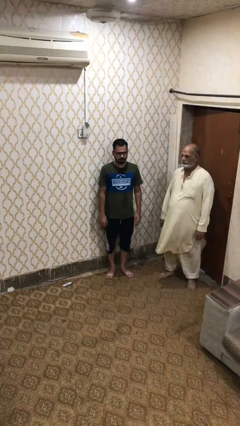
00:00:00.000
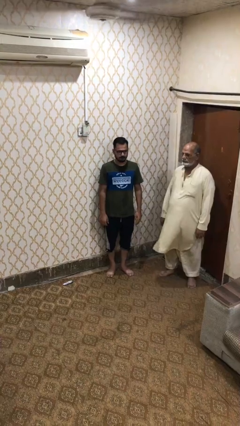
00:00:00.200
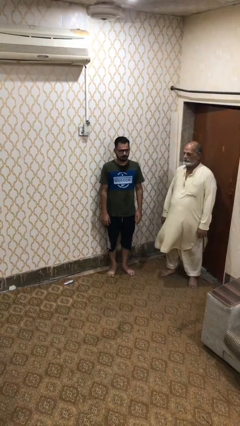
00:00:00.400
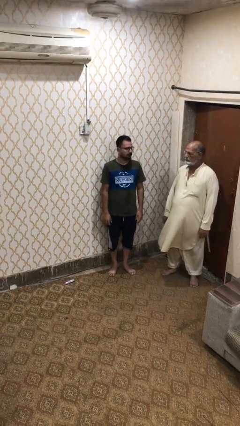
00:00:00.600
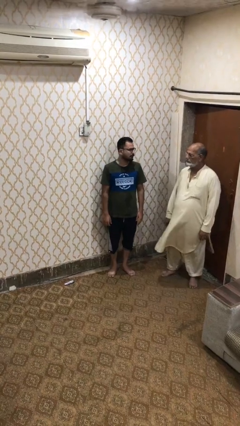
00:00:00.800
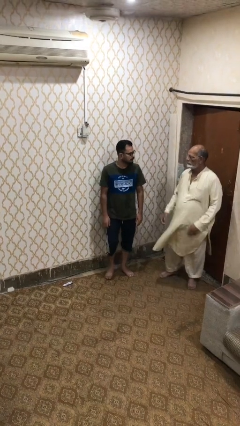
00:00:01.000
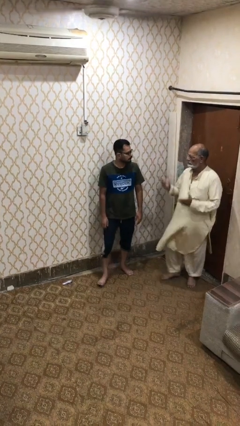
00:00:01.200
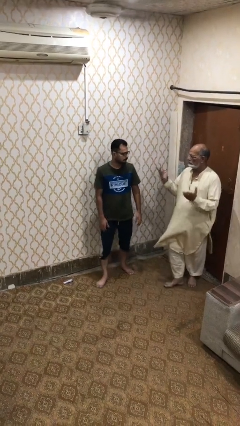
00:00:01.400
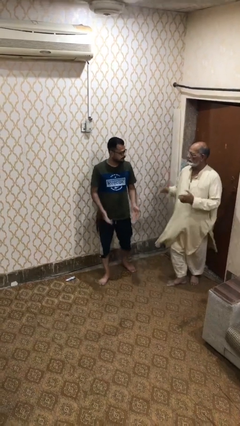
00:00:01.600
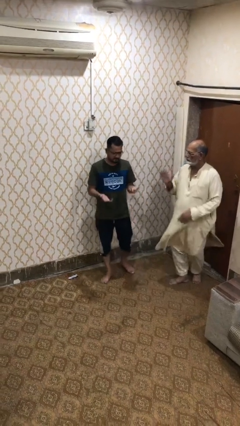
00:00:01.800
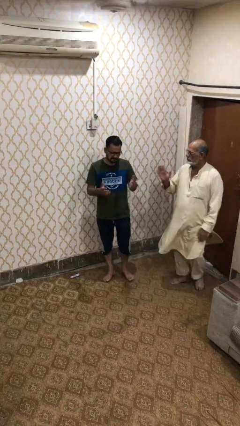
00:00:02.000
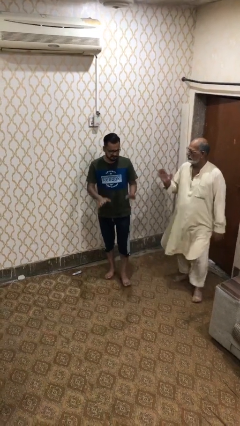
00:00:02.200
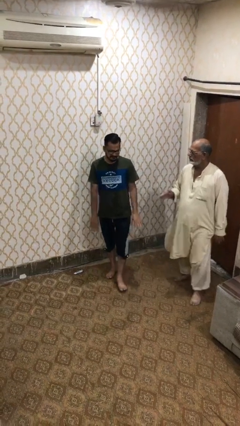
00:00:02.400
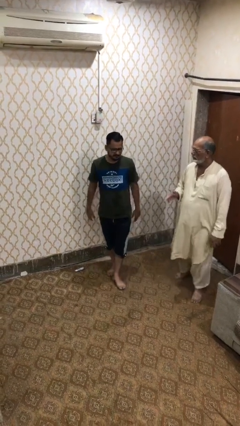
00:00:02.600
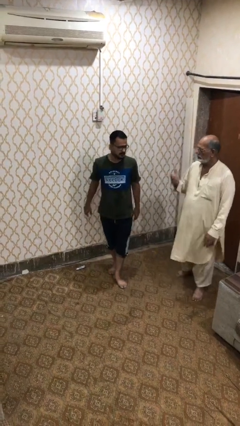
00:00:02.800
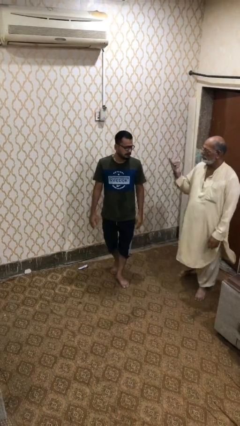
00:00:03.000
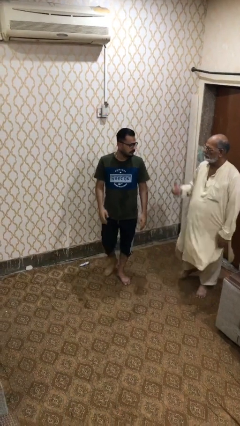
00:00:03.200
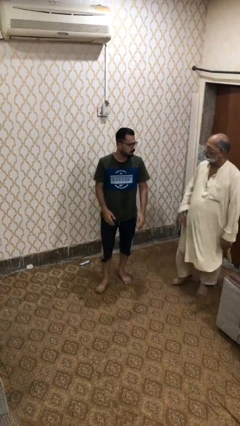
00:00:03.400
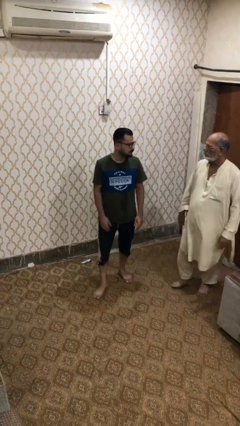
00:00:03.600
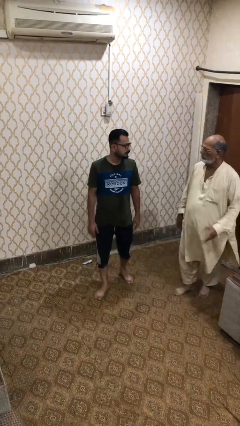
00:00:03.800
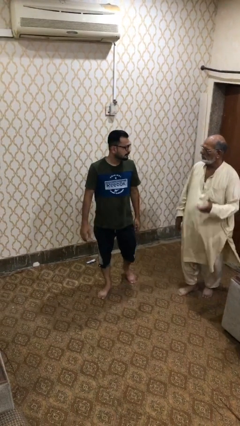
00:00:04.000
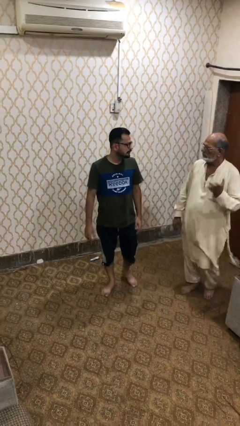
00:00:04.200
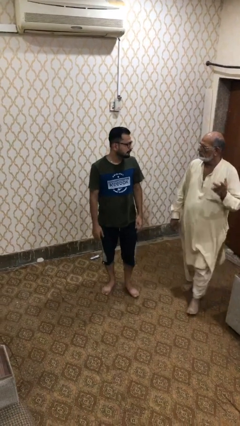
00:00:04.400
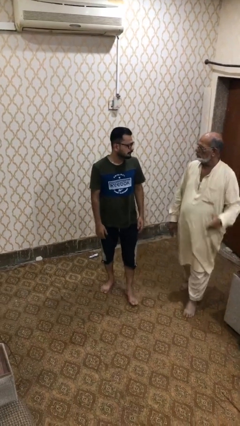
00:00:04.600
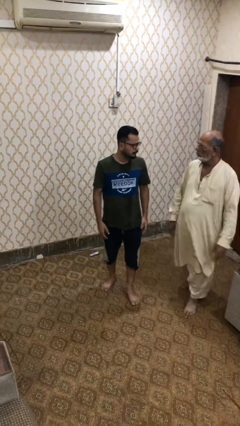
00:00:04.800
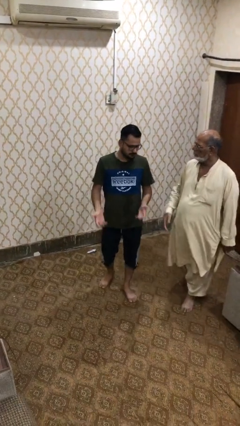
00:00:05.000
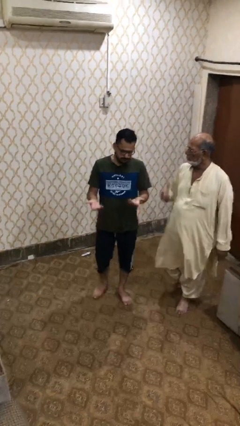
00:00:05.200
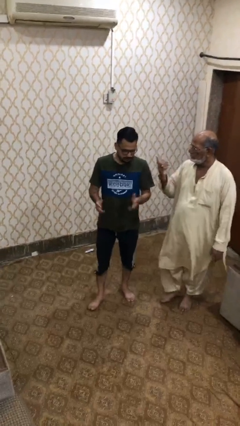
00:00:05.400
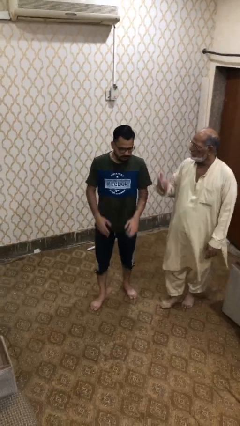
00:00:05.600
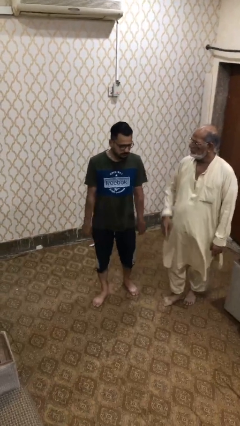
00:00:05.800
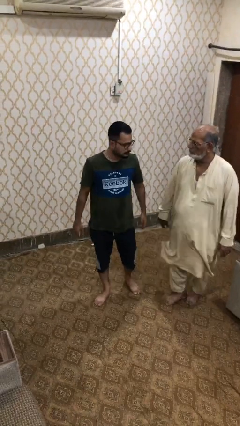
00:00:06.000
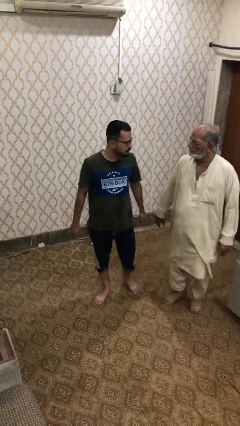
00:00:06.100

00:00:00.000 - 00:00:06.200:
person talks to person

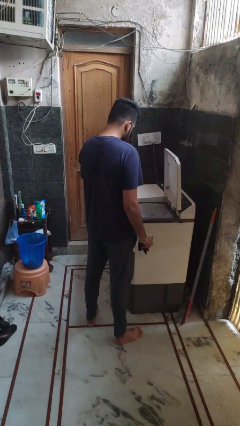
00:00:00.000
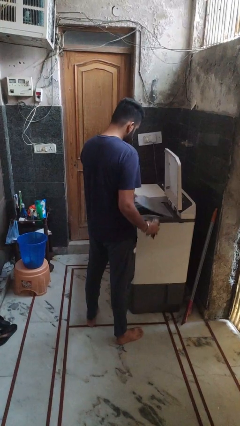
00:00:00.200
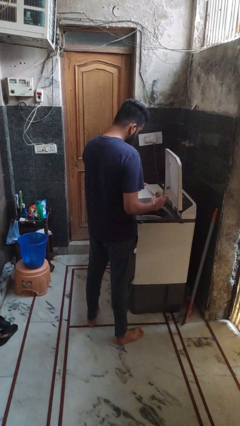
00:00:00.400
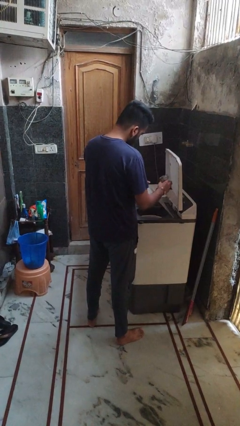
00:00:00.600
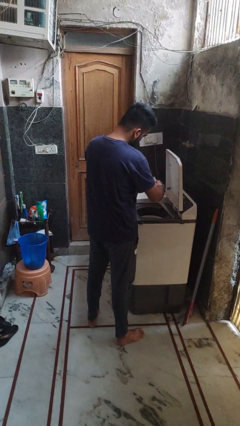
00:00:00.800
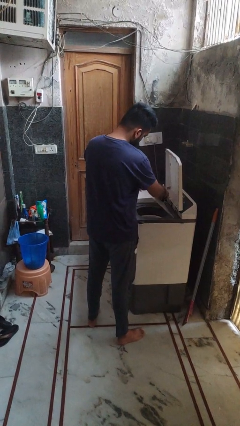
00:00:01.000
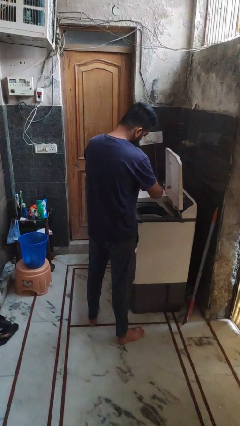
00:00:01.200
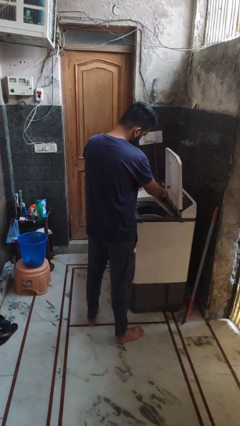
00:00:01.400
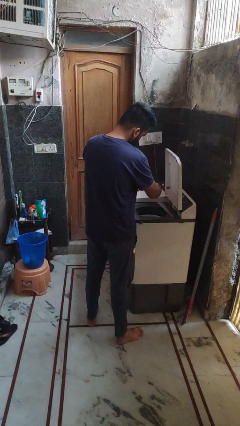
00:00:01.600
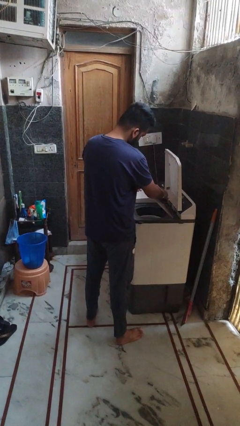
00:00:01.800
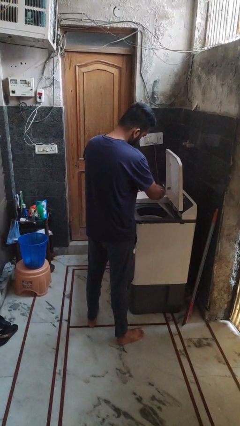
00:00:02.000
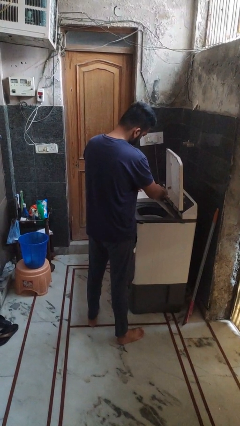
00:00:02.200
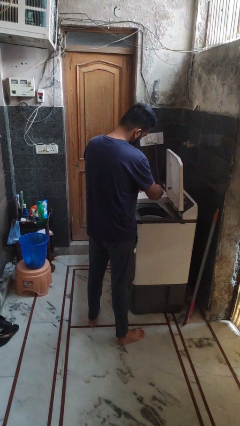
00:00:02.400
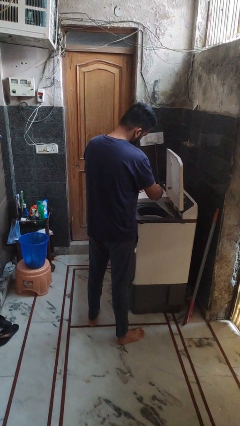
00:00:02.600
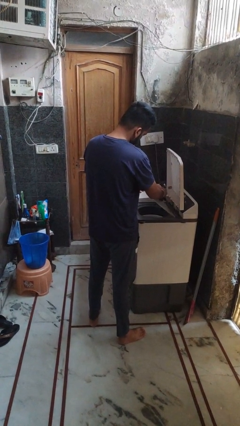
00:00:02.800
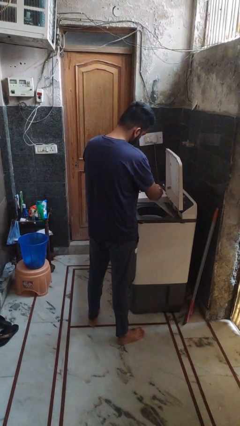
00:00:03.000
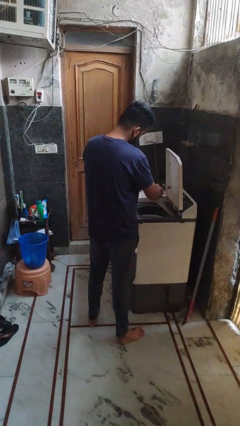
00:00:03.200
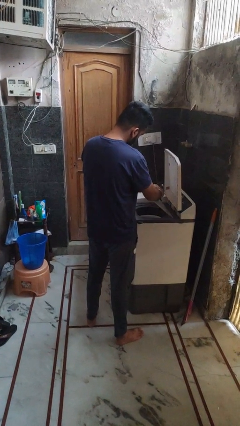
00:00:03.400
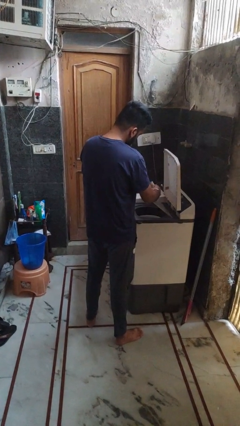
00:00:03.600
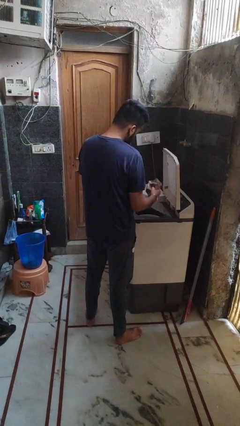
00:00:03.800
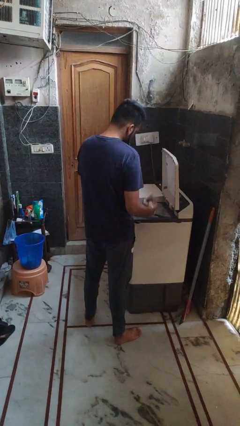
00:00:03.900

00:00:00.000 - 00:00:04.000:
person cleans dryer lint trap

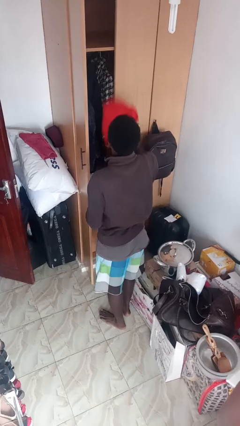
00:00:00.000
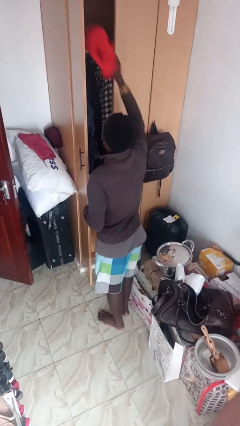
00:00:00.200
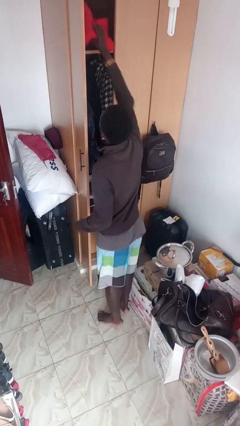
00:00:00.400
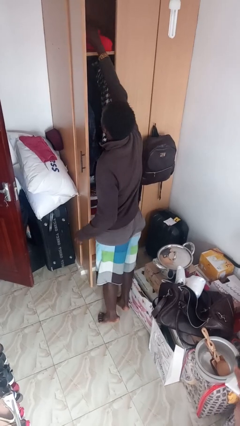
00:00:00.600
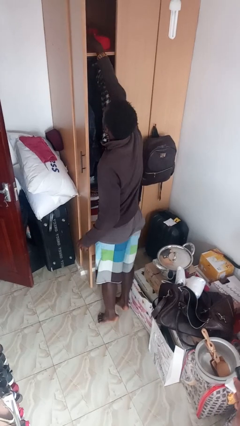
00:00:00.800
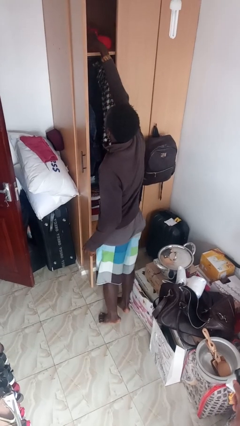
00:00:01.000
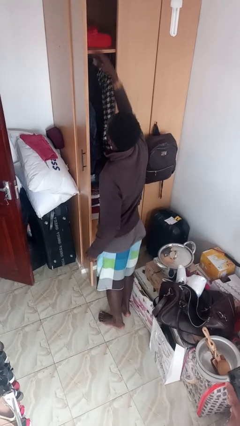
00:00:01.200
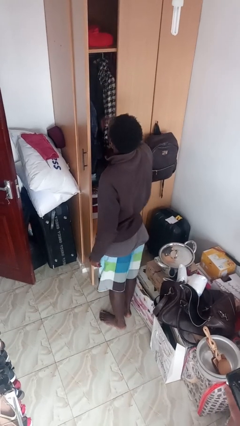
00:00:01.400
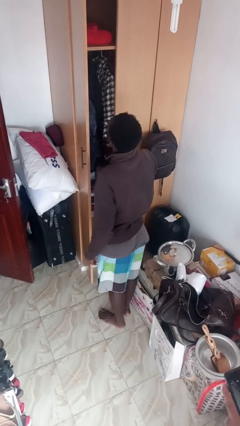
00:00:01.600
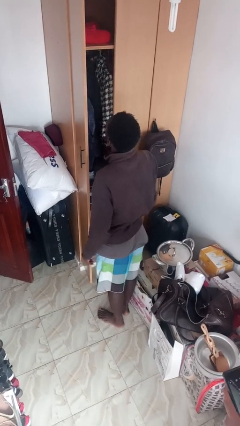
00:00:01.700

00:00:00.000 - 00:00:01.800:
person puts down object on shelf

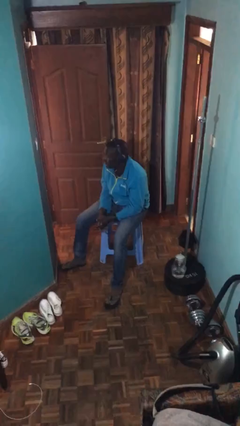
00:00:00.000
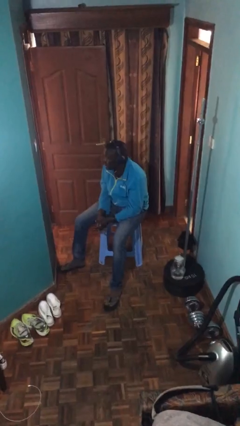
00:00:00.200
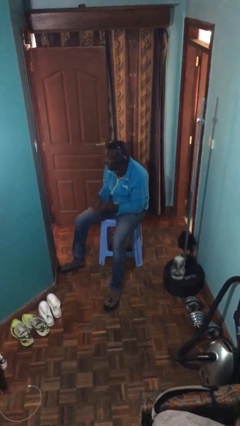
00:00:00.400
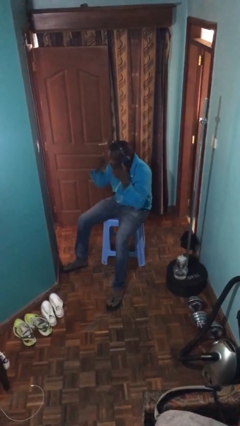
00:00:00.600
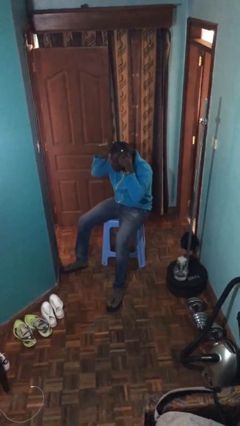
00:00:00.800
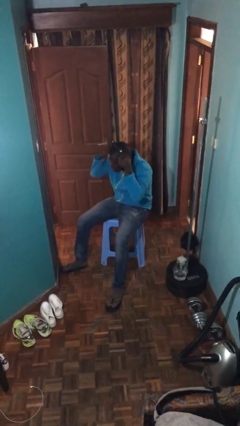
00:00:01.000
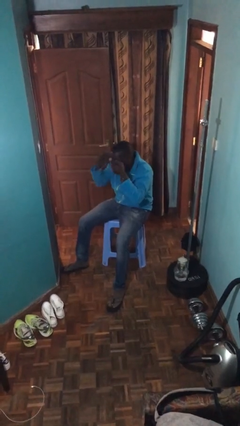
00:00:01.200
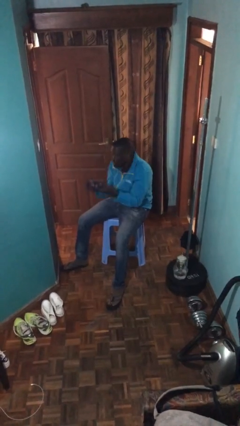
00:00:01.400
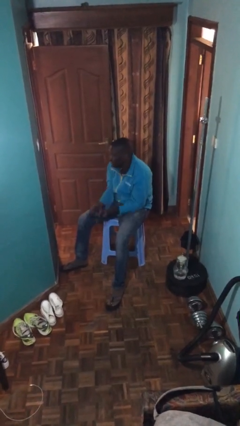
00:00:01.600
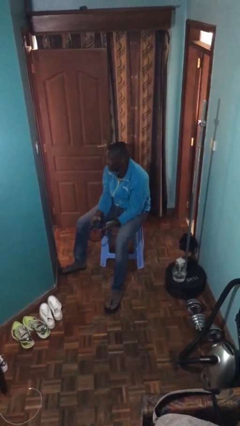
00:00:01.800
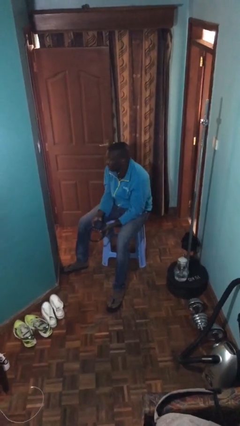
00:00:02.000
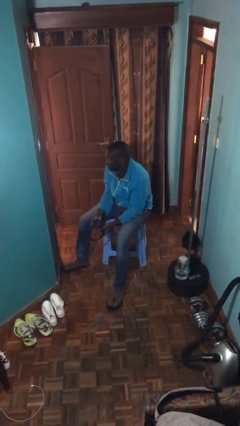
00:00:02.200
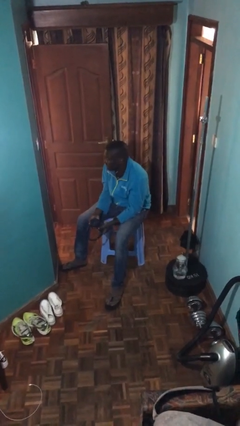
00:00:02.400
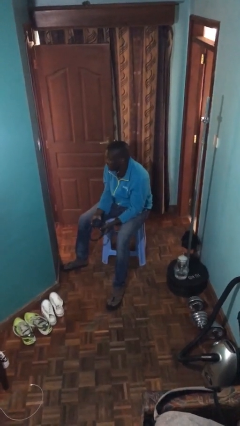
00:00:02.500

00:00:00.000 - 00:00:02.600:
person takes off headphones

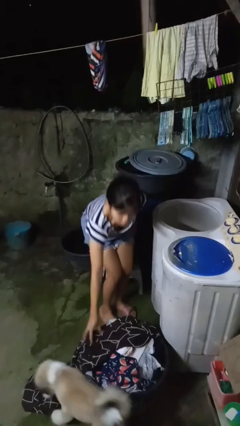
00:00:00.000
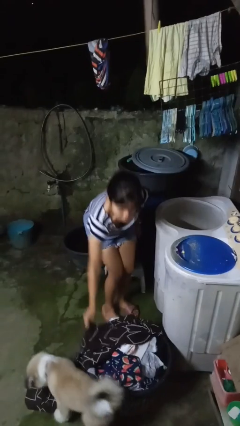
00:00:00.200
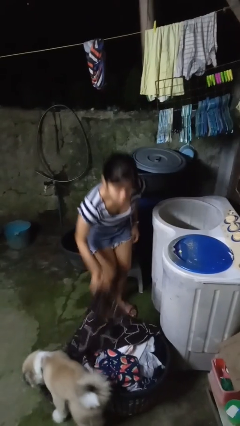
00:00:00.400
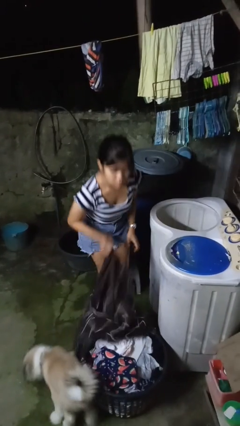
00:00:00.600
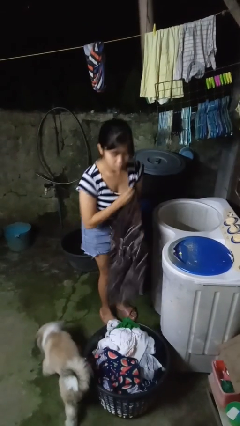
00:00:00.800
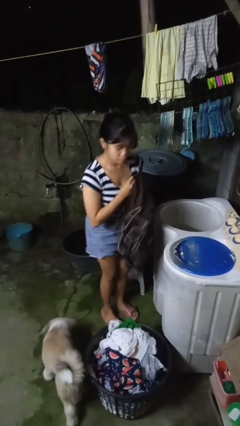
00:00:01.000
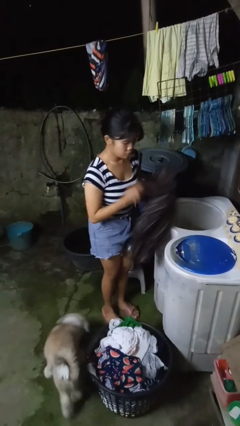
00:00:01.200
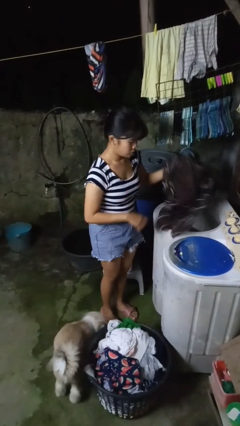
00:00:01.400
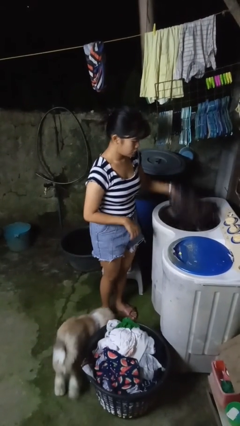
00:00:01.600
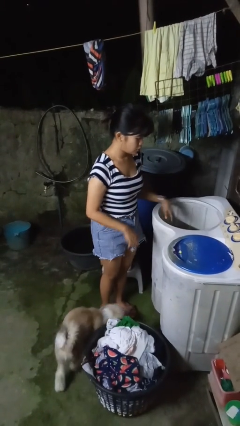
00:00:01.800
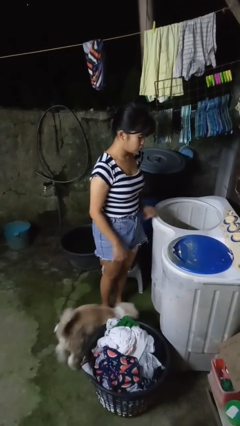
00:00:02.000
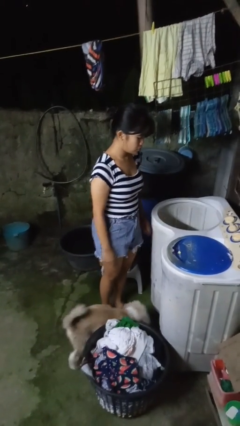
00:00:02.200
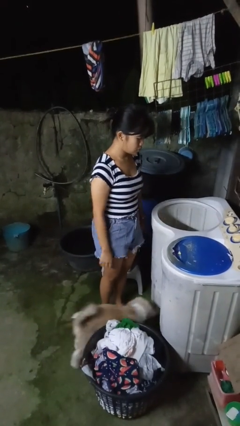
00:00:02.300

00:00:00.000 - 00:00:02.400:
person loads clotheswasher

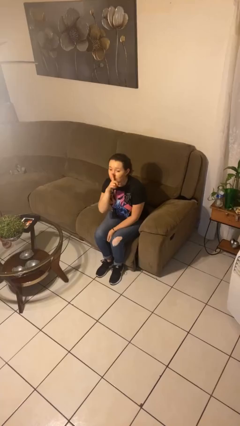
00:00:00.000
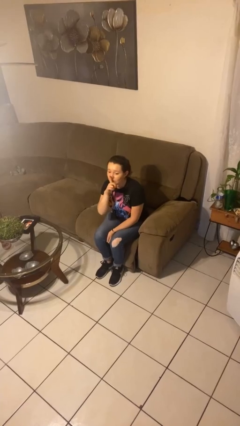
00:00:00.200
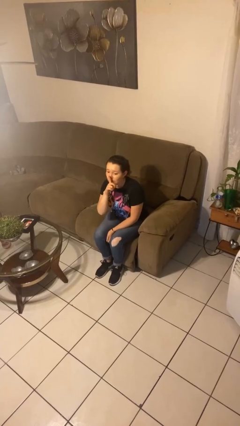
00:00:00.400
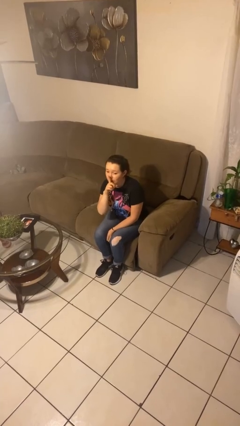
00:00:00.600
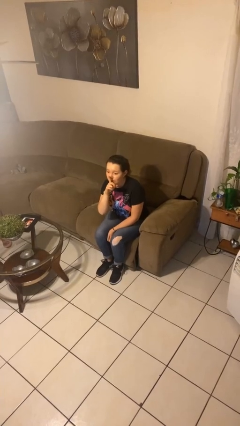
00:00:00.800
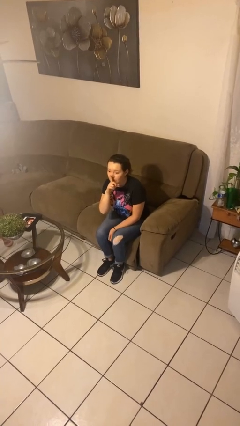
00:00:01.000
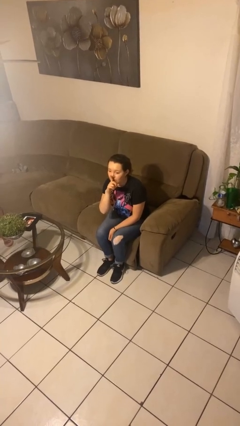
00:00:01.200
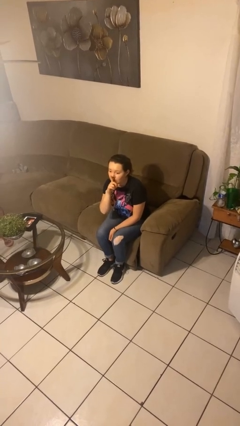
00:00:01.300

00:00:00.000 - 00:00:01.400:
person gestures be quiet